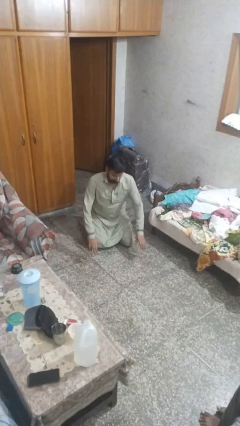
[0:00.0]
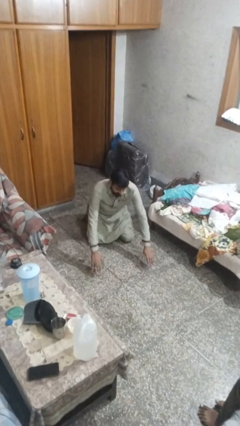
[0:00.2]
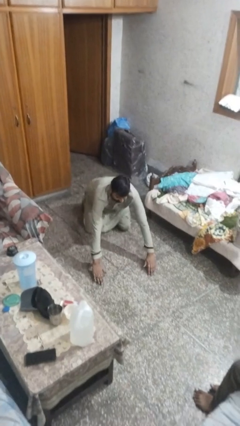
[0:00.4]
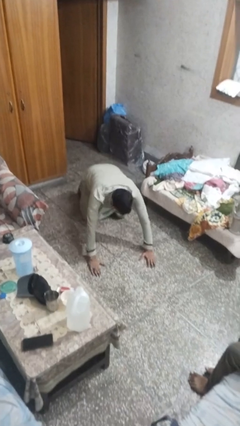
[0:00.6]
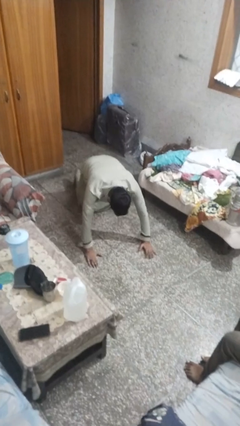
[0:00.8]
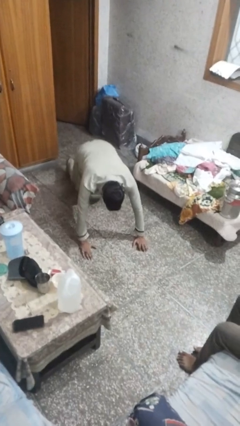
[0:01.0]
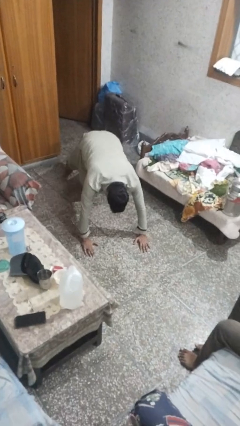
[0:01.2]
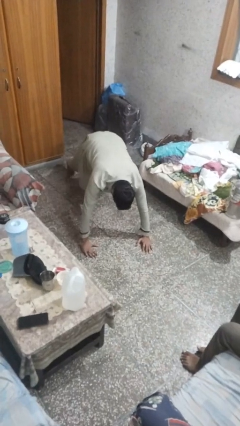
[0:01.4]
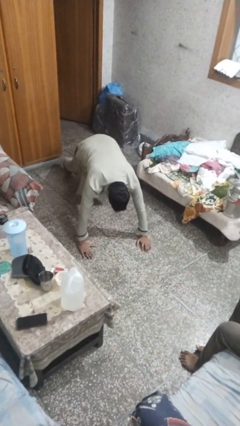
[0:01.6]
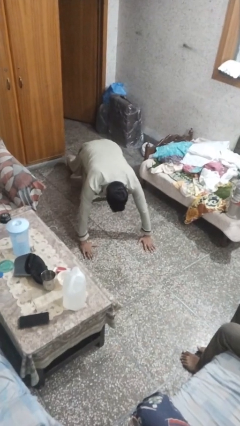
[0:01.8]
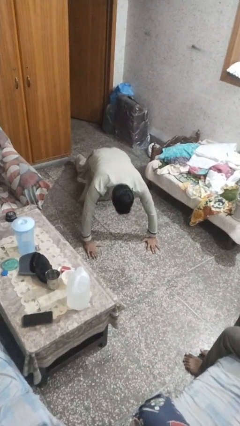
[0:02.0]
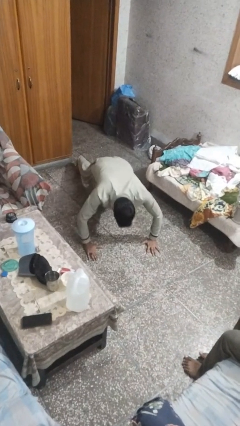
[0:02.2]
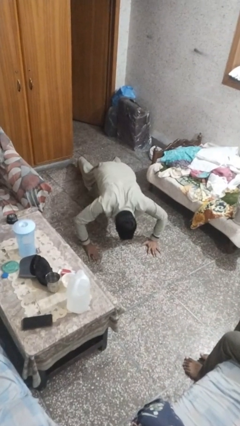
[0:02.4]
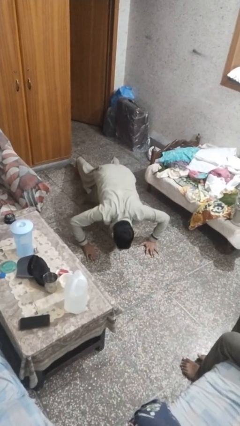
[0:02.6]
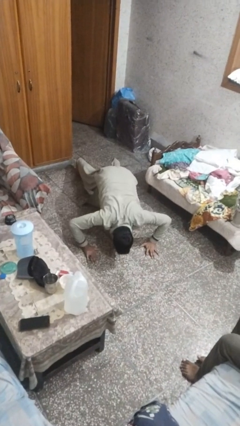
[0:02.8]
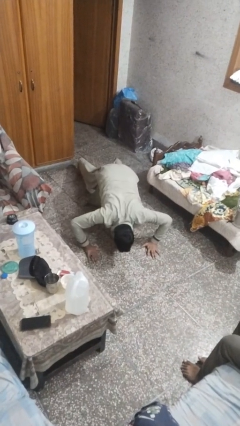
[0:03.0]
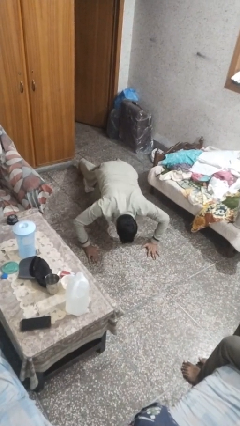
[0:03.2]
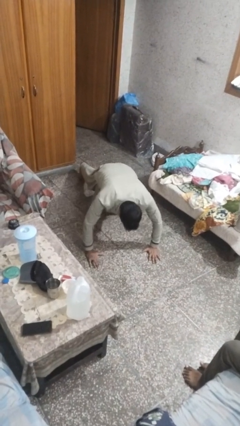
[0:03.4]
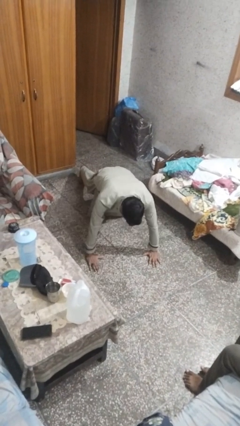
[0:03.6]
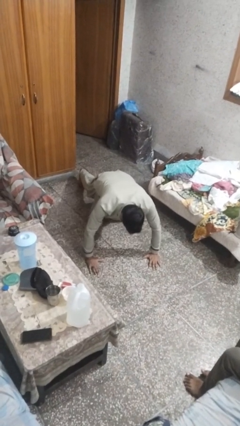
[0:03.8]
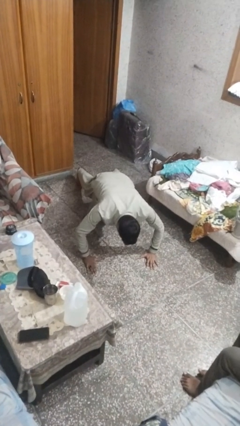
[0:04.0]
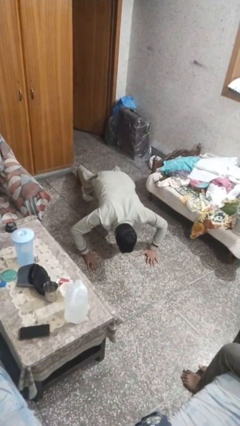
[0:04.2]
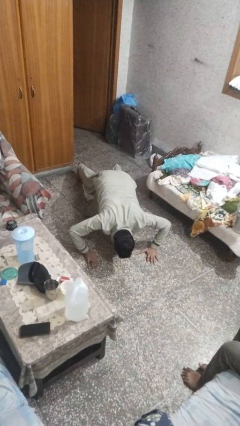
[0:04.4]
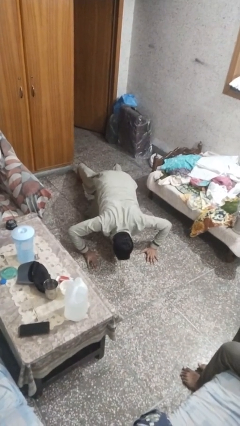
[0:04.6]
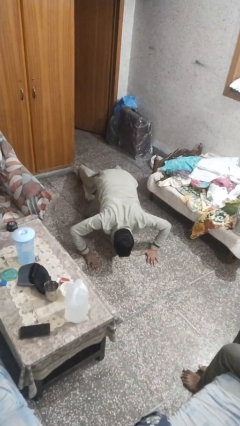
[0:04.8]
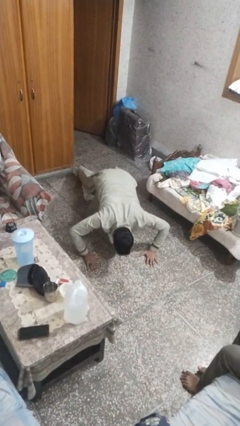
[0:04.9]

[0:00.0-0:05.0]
person exercises with pushup

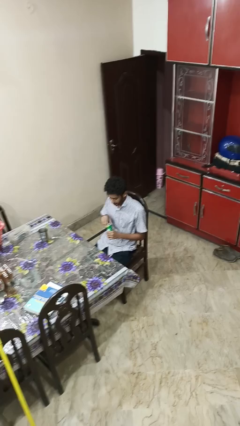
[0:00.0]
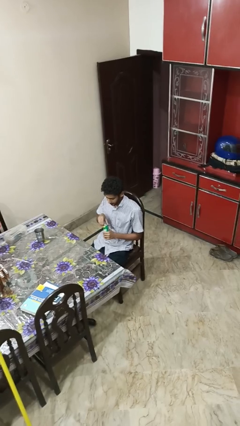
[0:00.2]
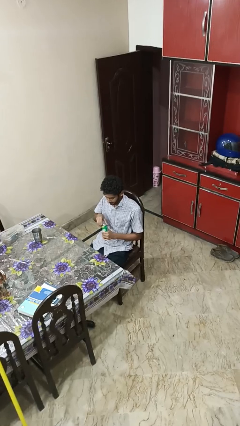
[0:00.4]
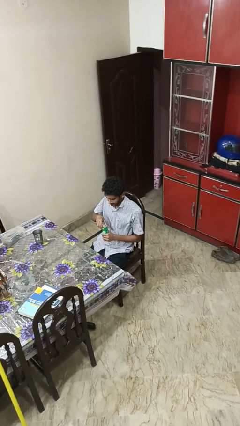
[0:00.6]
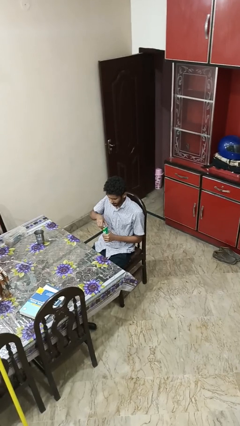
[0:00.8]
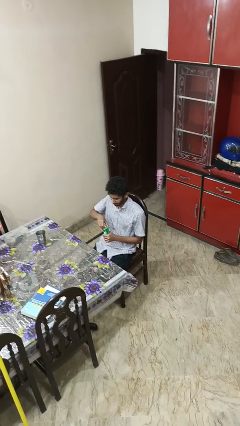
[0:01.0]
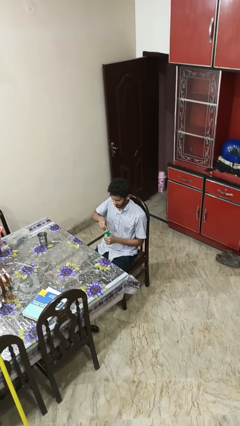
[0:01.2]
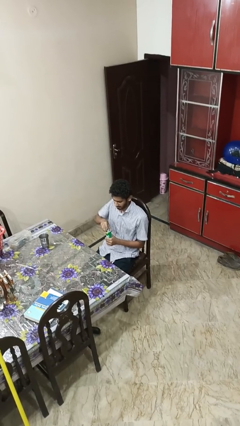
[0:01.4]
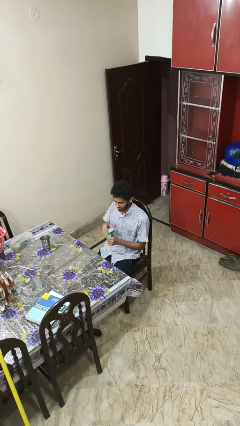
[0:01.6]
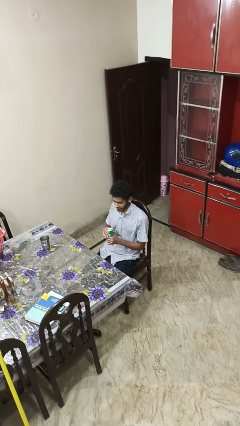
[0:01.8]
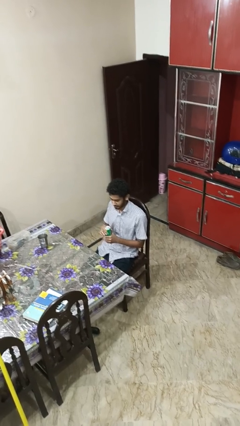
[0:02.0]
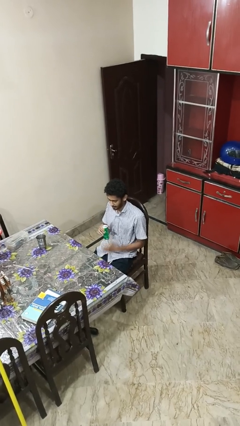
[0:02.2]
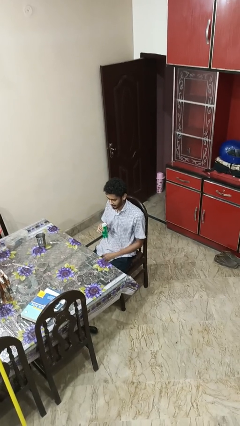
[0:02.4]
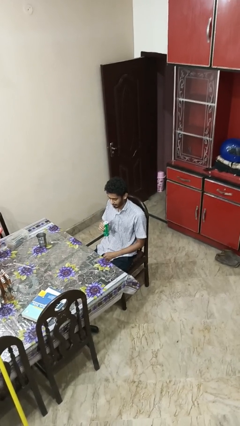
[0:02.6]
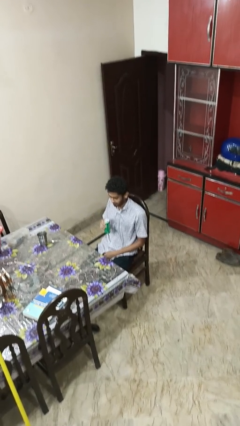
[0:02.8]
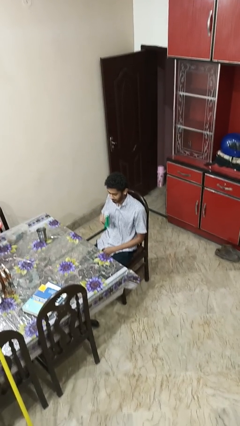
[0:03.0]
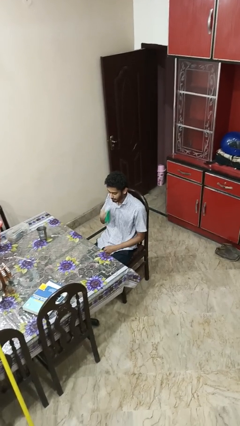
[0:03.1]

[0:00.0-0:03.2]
person opens beverage can

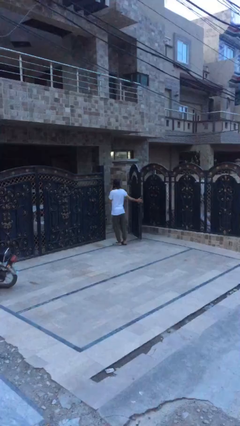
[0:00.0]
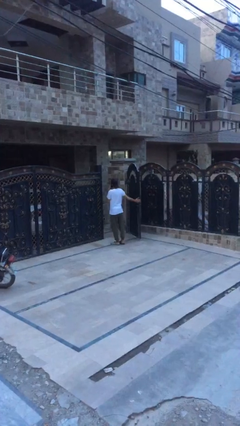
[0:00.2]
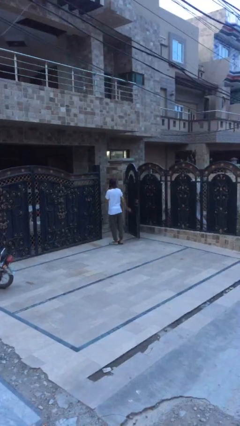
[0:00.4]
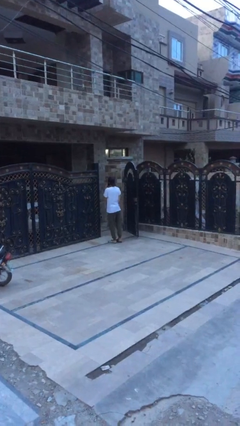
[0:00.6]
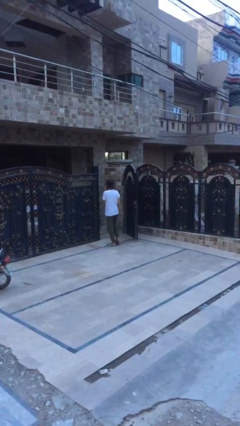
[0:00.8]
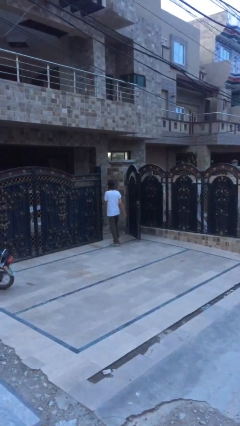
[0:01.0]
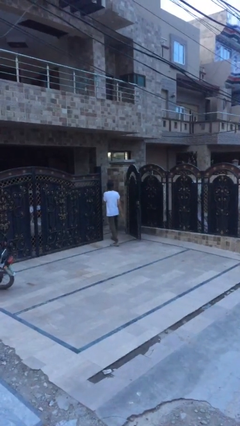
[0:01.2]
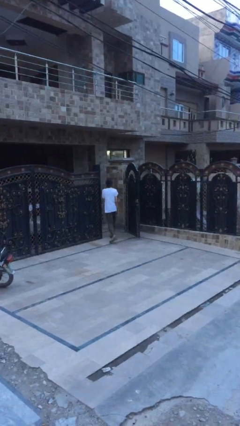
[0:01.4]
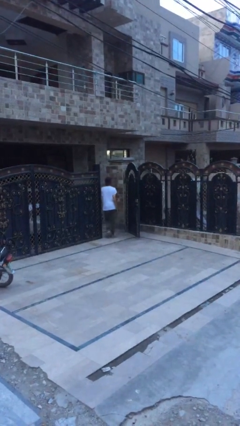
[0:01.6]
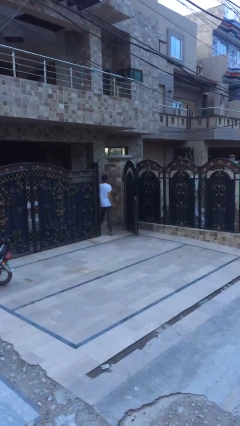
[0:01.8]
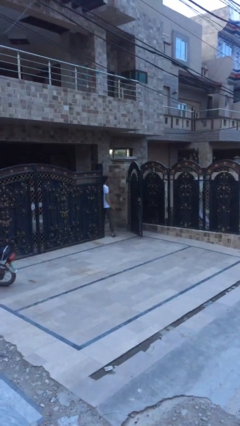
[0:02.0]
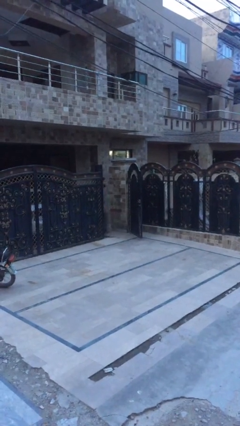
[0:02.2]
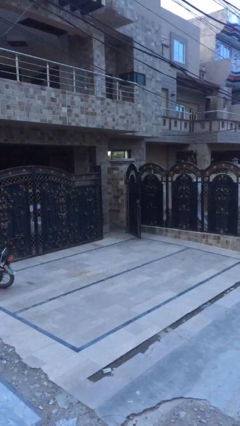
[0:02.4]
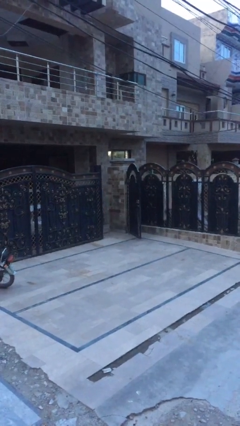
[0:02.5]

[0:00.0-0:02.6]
person exits scene through structure

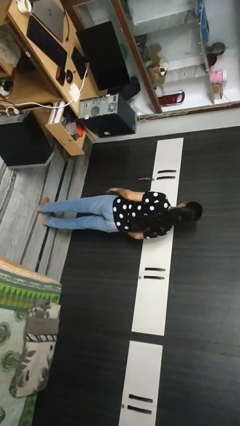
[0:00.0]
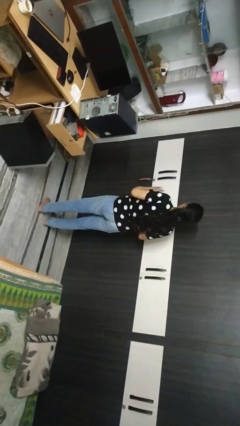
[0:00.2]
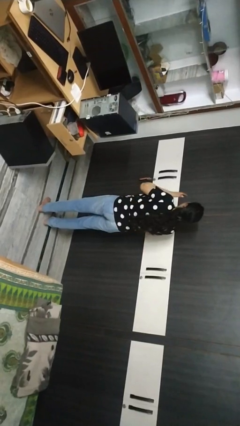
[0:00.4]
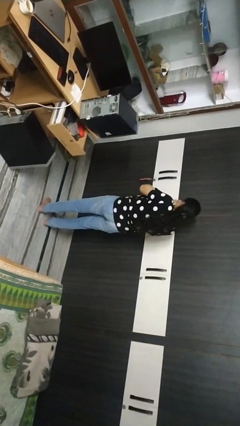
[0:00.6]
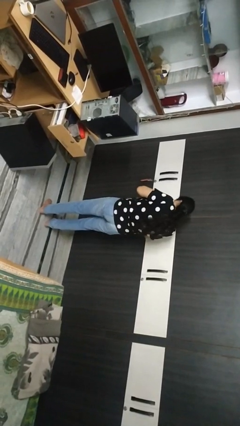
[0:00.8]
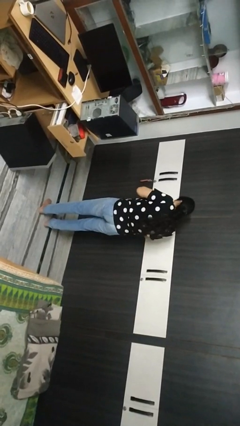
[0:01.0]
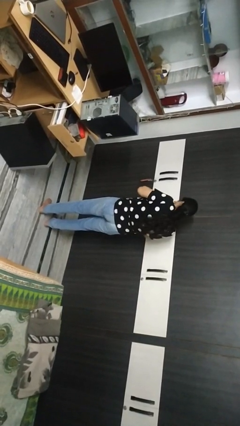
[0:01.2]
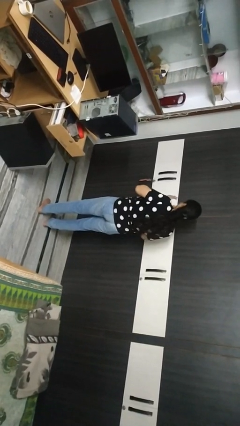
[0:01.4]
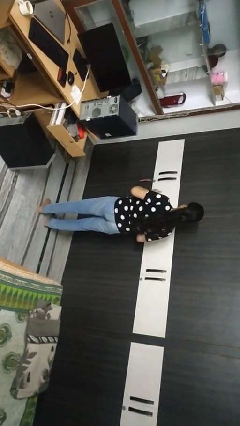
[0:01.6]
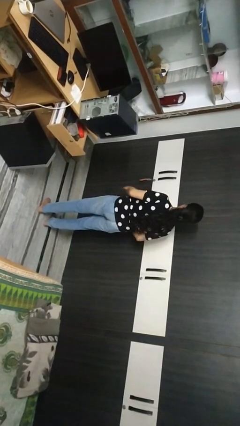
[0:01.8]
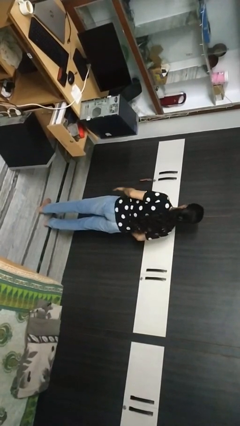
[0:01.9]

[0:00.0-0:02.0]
person sneezes into hand

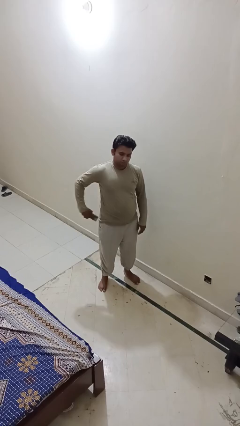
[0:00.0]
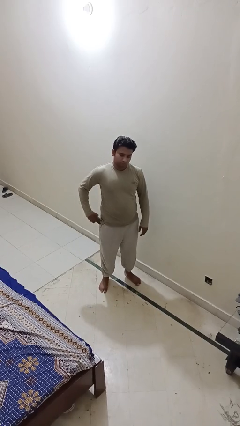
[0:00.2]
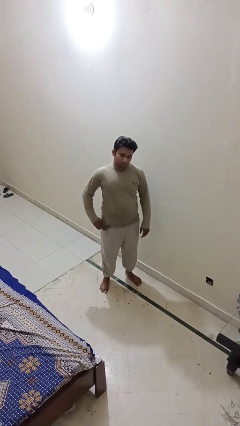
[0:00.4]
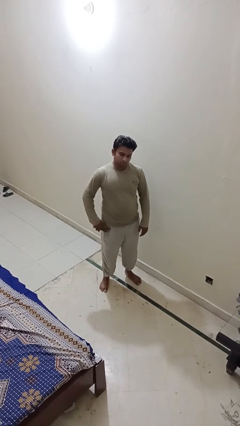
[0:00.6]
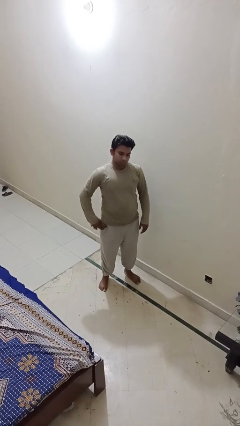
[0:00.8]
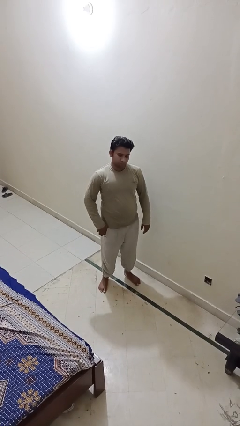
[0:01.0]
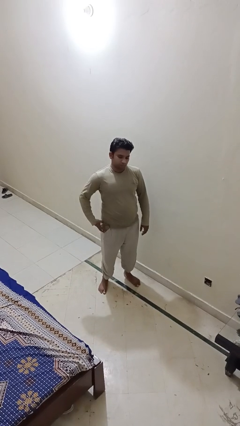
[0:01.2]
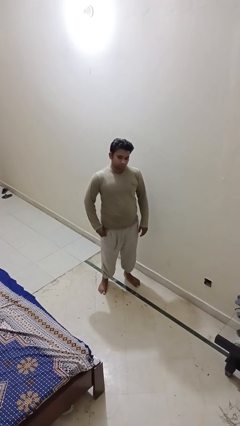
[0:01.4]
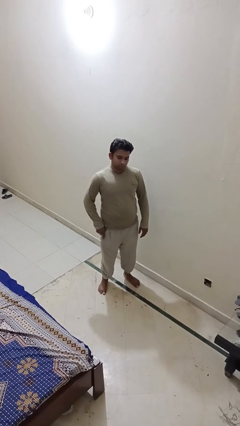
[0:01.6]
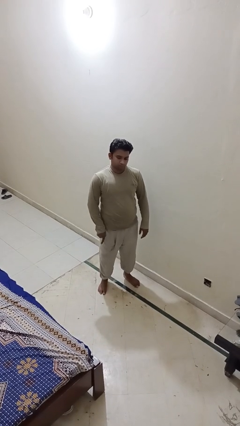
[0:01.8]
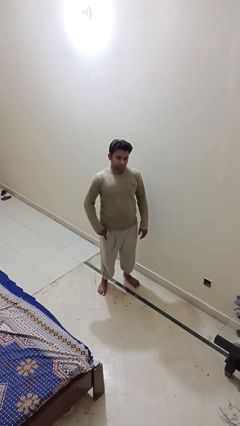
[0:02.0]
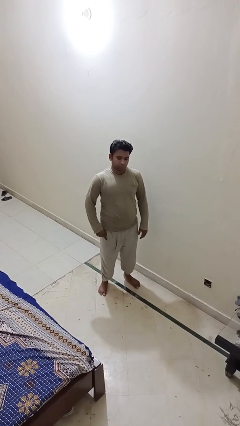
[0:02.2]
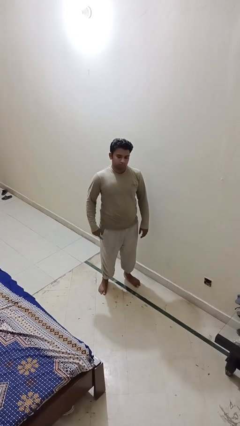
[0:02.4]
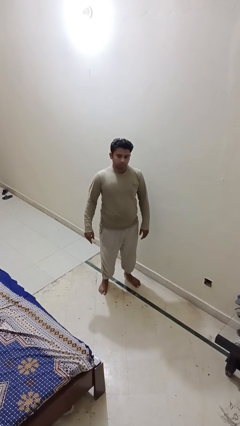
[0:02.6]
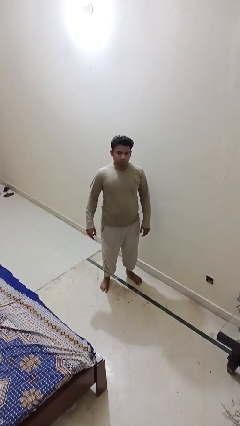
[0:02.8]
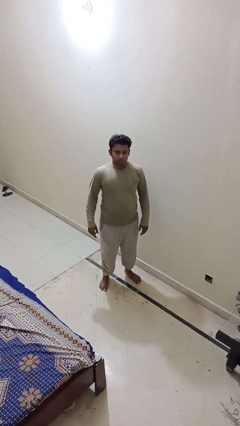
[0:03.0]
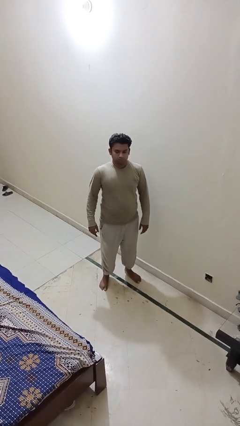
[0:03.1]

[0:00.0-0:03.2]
person puts phone into pocket

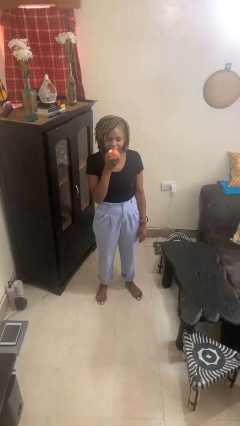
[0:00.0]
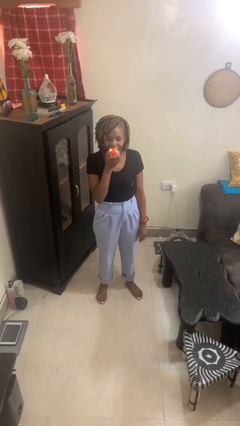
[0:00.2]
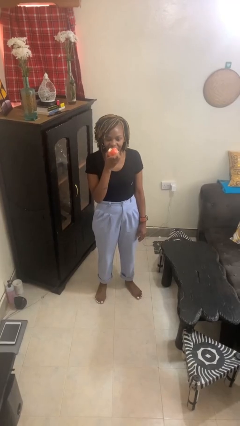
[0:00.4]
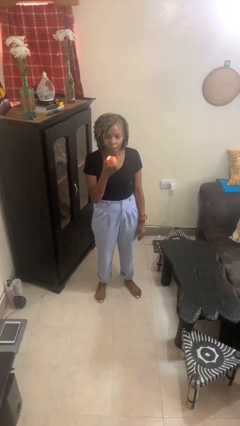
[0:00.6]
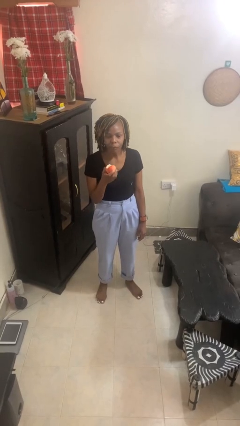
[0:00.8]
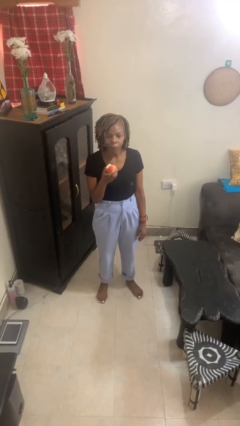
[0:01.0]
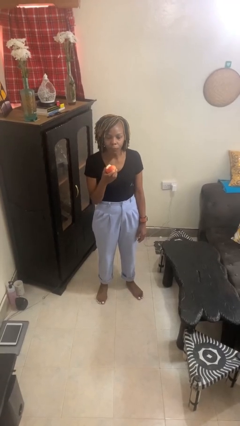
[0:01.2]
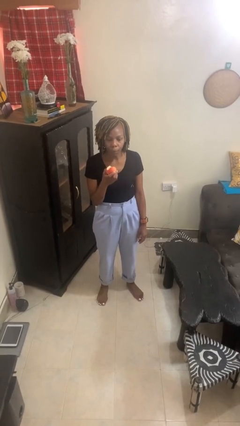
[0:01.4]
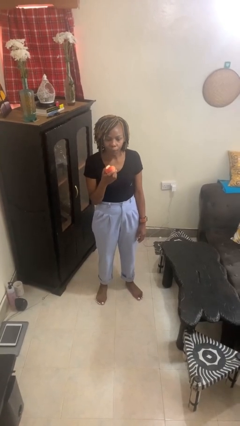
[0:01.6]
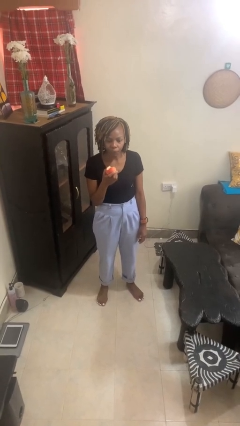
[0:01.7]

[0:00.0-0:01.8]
person eats apple
